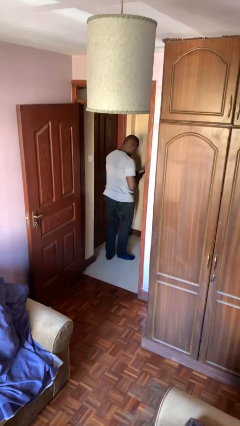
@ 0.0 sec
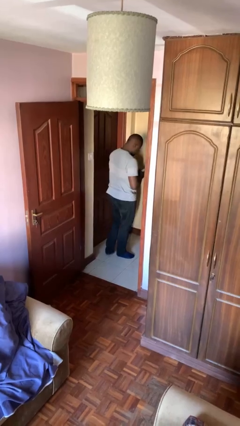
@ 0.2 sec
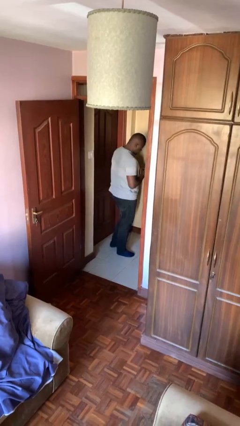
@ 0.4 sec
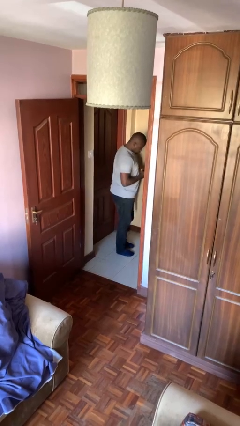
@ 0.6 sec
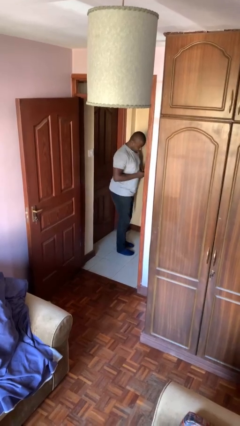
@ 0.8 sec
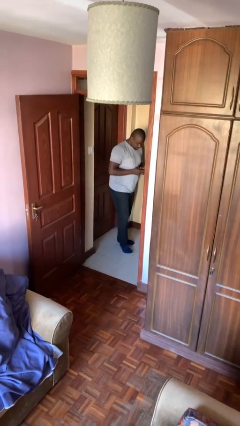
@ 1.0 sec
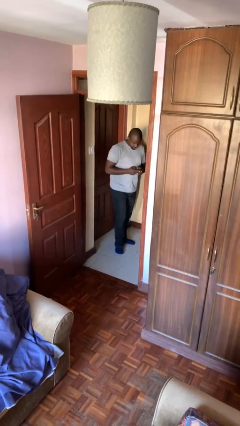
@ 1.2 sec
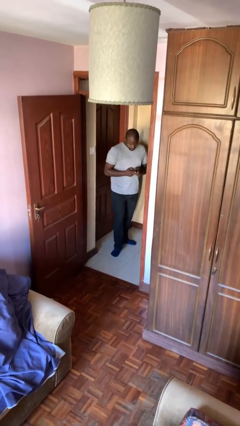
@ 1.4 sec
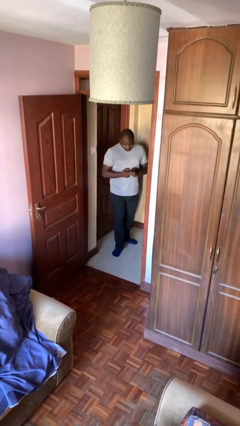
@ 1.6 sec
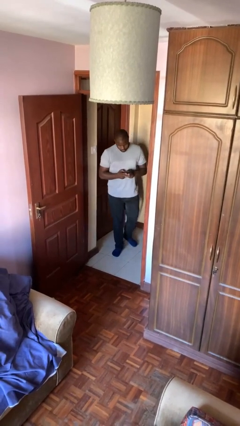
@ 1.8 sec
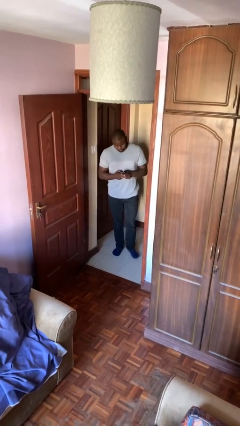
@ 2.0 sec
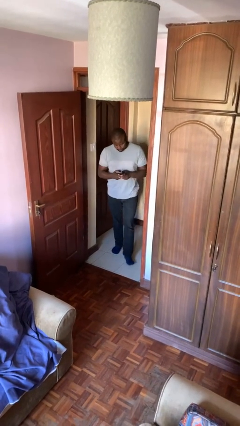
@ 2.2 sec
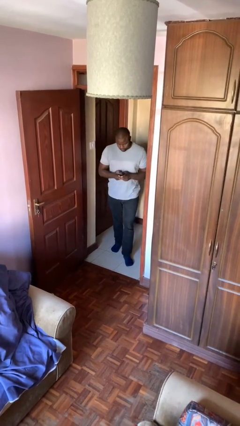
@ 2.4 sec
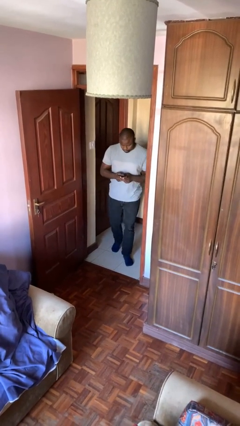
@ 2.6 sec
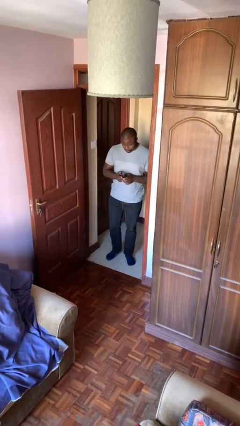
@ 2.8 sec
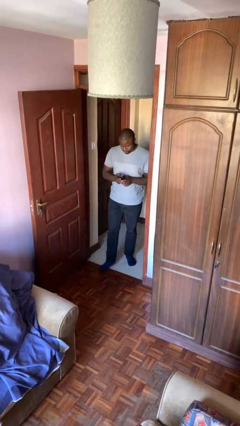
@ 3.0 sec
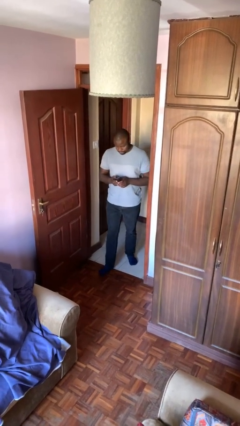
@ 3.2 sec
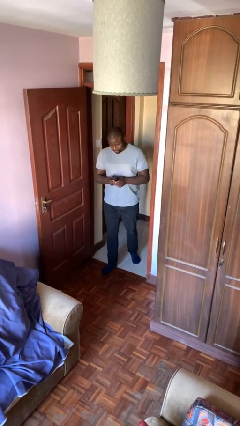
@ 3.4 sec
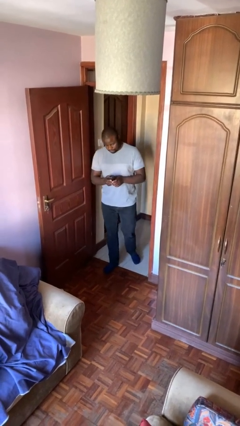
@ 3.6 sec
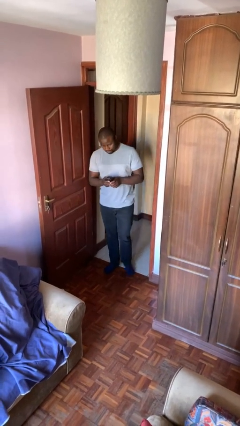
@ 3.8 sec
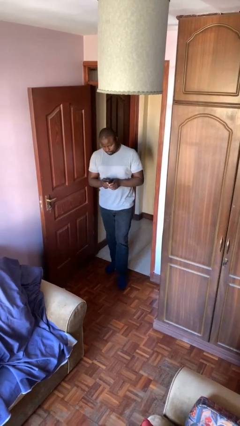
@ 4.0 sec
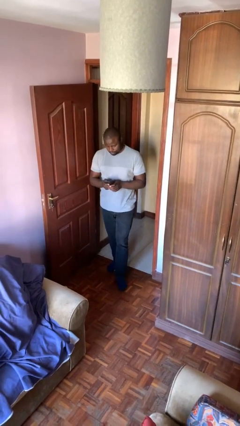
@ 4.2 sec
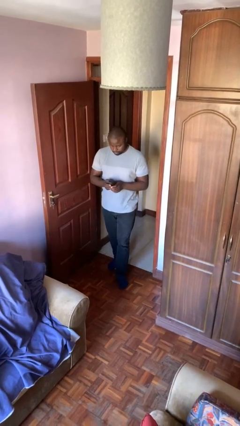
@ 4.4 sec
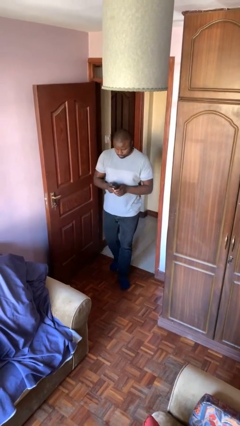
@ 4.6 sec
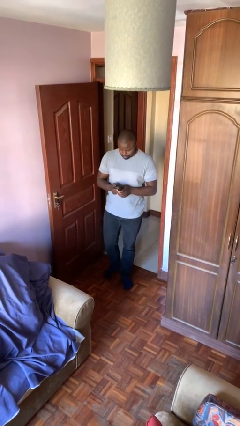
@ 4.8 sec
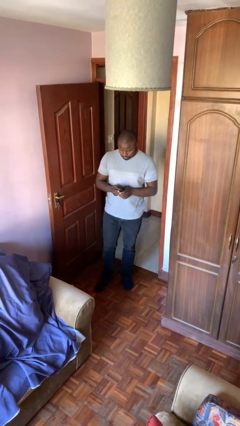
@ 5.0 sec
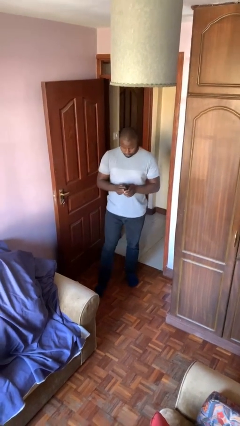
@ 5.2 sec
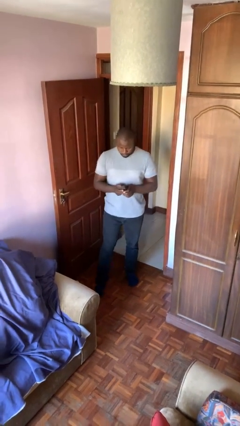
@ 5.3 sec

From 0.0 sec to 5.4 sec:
person enters scene through structure

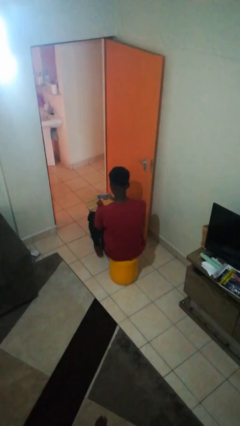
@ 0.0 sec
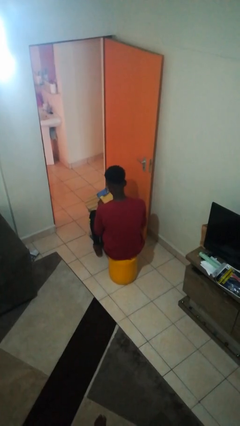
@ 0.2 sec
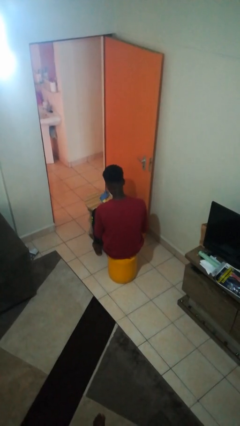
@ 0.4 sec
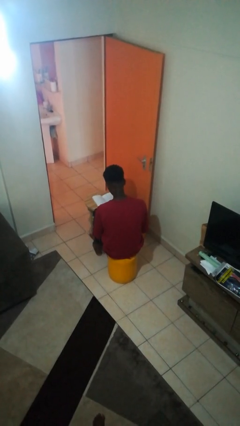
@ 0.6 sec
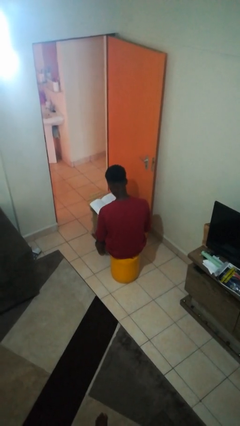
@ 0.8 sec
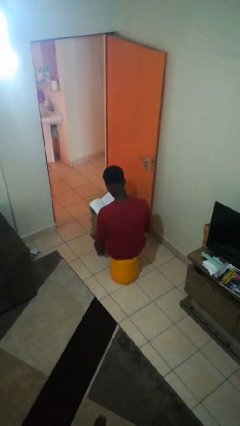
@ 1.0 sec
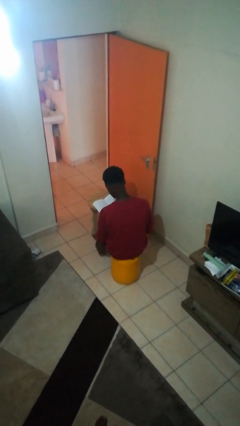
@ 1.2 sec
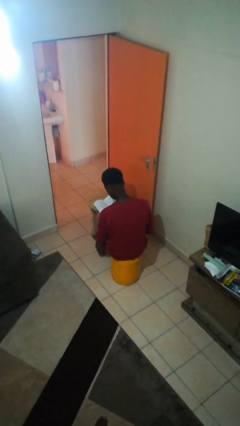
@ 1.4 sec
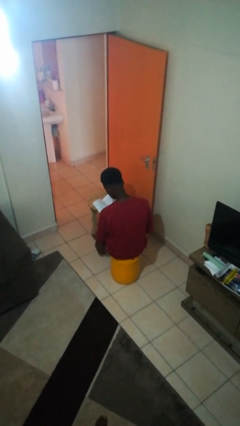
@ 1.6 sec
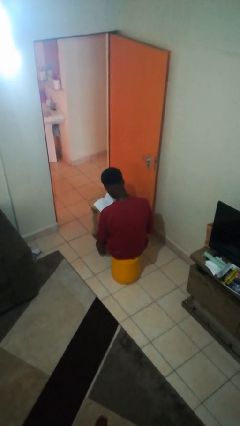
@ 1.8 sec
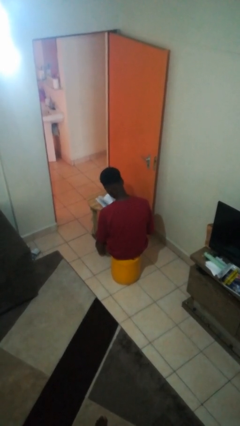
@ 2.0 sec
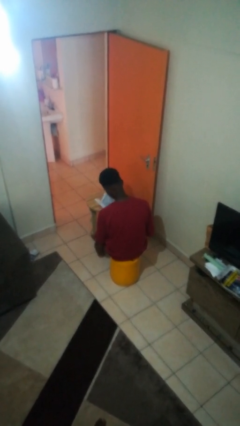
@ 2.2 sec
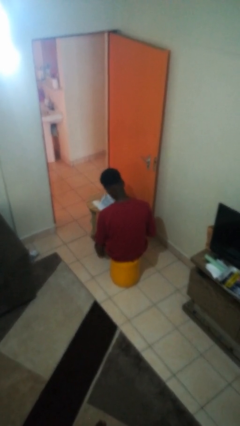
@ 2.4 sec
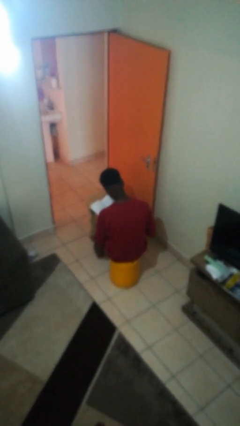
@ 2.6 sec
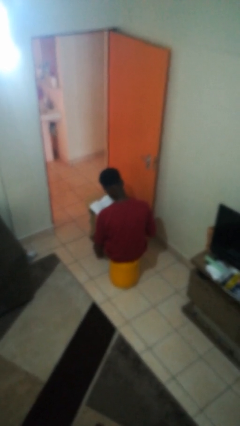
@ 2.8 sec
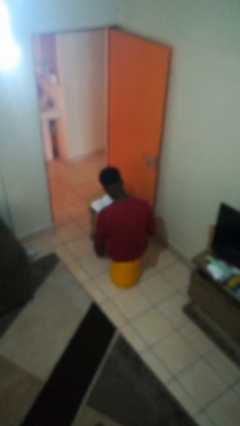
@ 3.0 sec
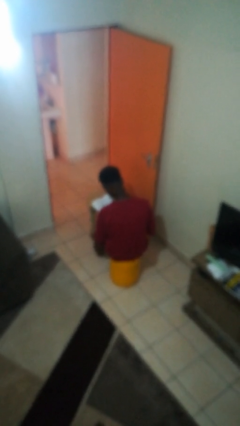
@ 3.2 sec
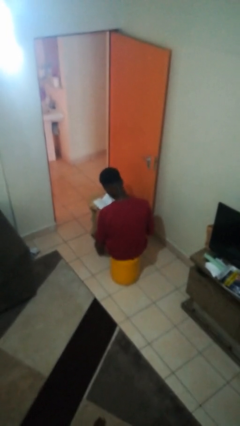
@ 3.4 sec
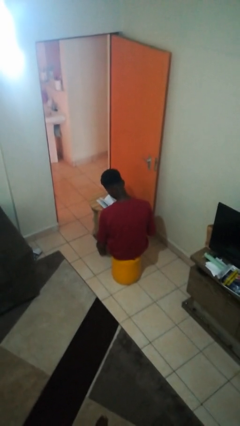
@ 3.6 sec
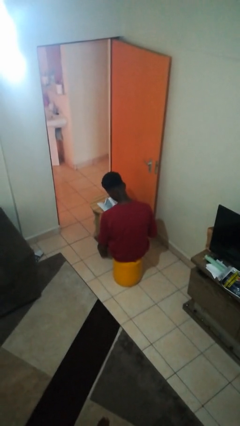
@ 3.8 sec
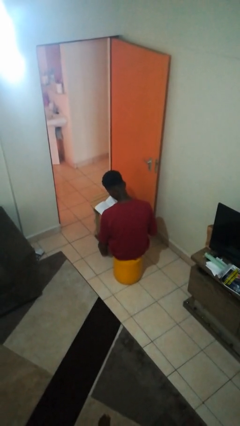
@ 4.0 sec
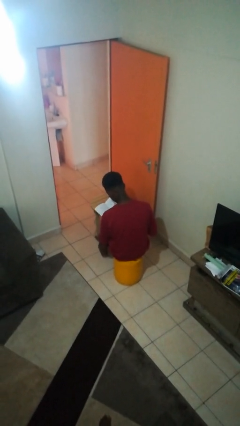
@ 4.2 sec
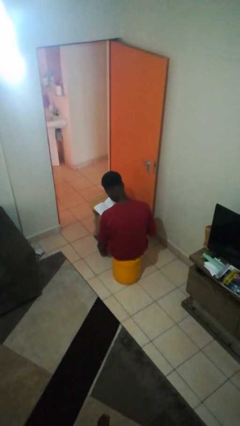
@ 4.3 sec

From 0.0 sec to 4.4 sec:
person reads book

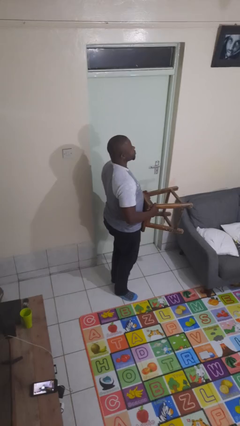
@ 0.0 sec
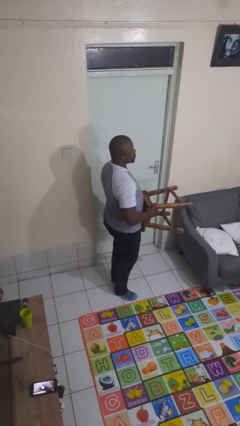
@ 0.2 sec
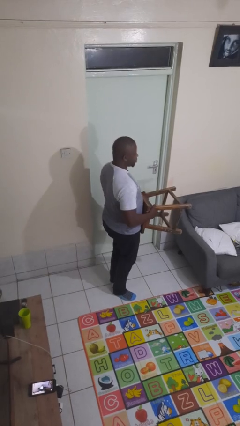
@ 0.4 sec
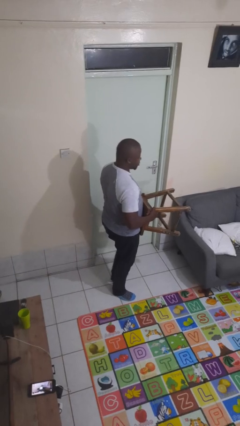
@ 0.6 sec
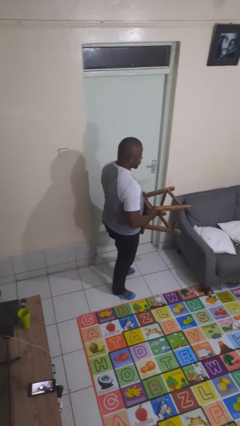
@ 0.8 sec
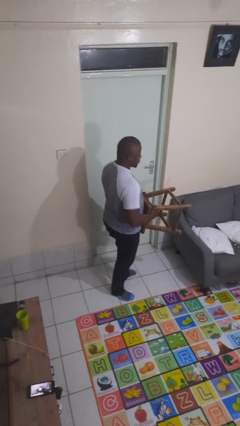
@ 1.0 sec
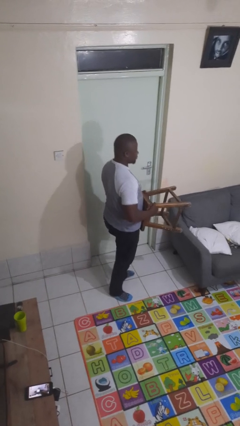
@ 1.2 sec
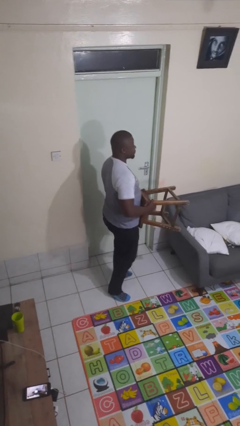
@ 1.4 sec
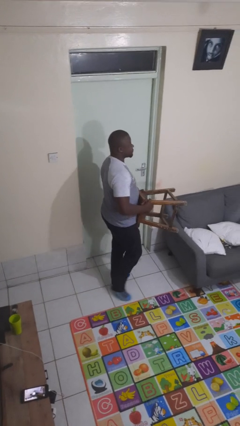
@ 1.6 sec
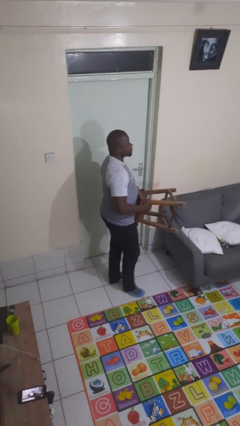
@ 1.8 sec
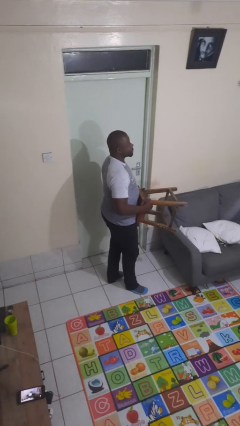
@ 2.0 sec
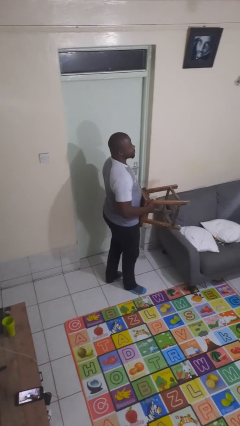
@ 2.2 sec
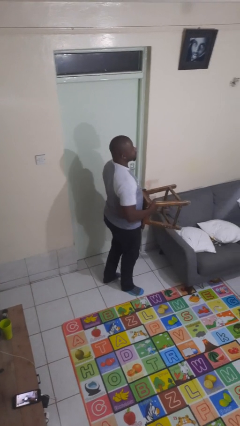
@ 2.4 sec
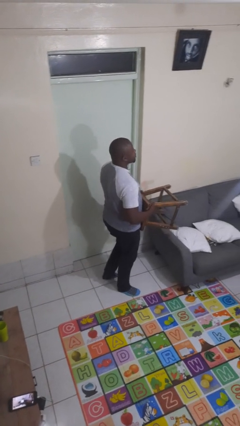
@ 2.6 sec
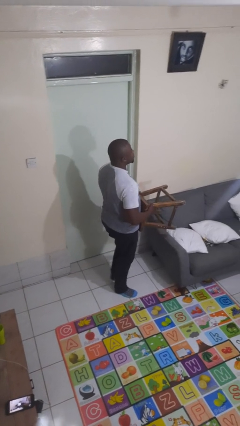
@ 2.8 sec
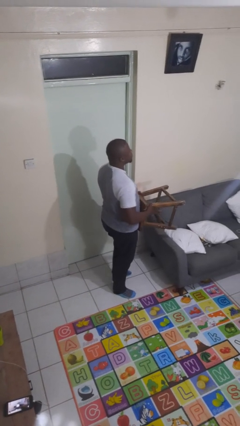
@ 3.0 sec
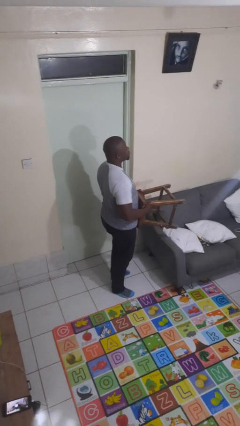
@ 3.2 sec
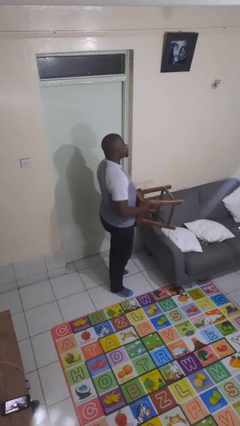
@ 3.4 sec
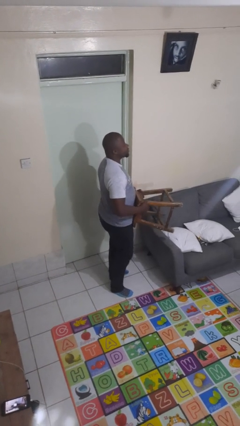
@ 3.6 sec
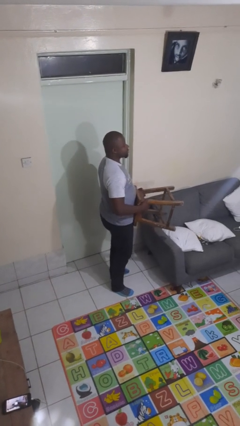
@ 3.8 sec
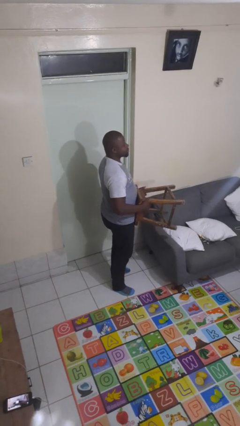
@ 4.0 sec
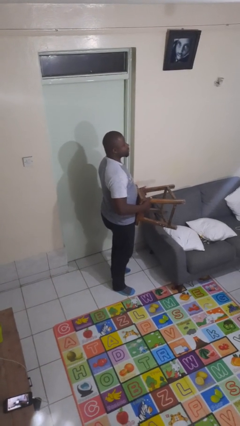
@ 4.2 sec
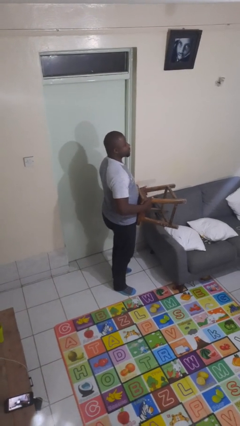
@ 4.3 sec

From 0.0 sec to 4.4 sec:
person carries furniture

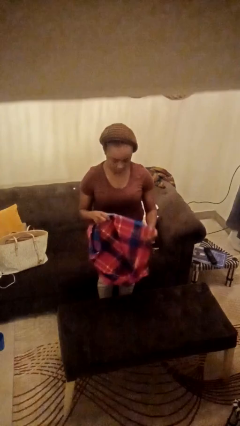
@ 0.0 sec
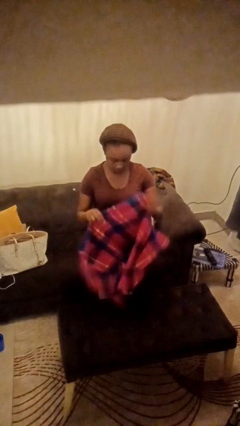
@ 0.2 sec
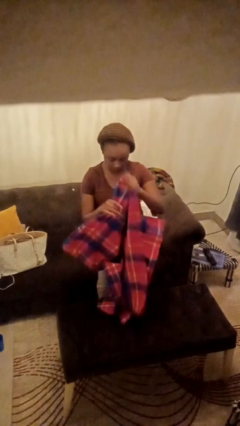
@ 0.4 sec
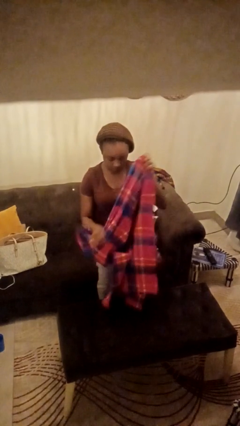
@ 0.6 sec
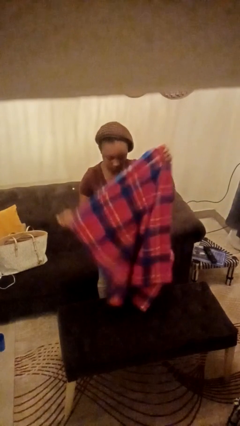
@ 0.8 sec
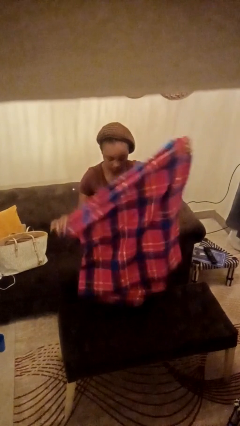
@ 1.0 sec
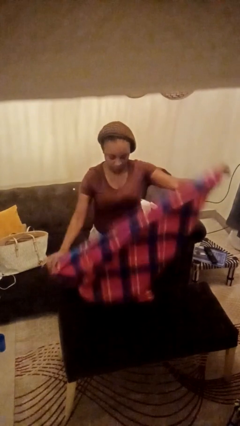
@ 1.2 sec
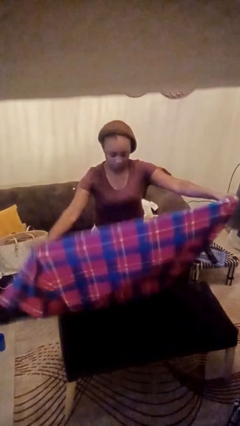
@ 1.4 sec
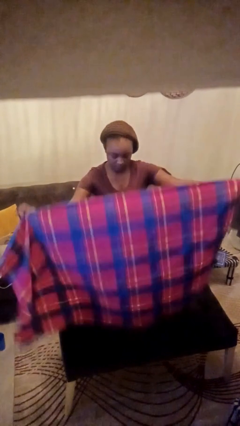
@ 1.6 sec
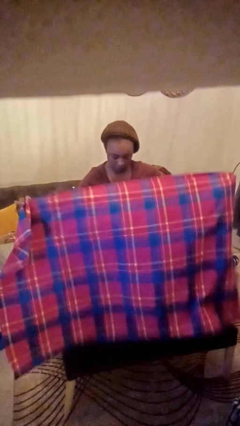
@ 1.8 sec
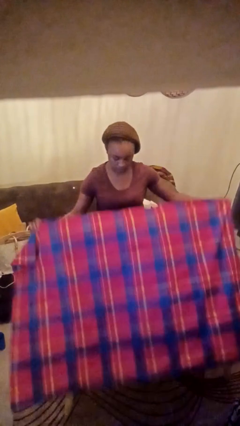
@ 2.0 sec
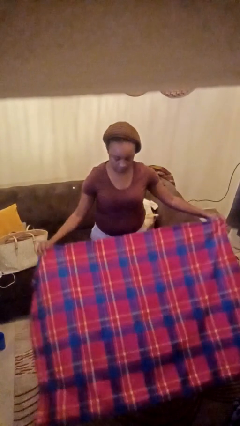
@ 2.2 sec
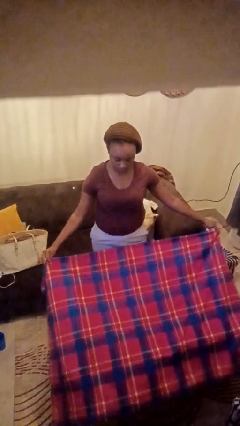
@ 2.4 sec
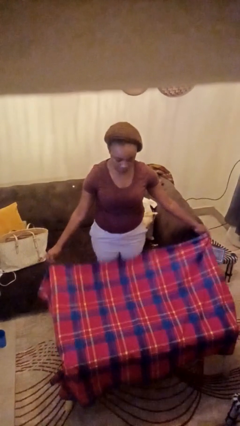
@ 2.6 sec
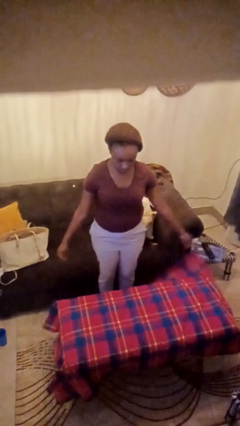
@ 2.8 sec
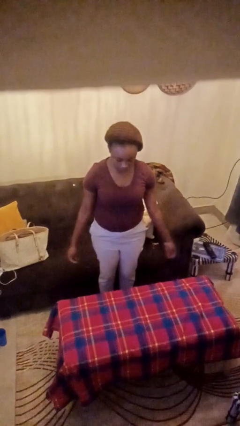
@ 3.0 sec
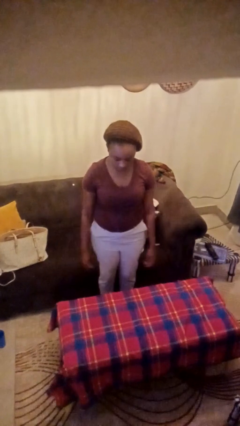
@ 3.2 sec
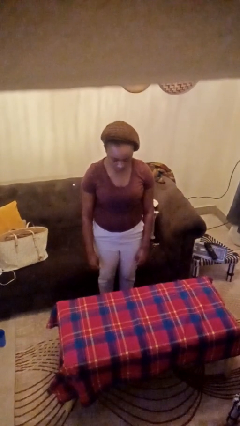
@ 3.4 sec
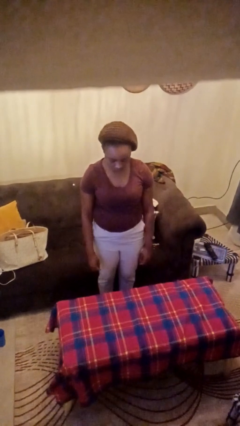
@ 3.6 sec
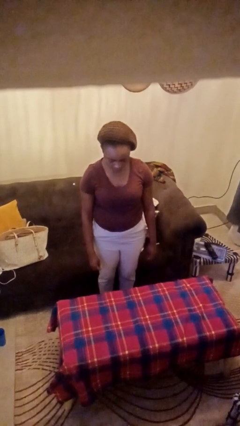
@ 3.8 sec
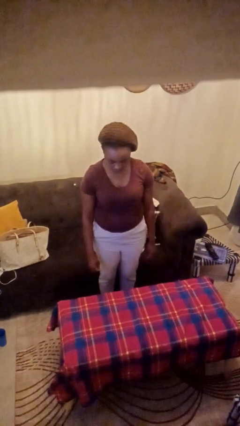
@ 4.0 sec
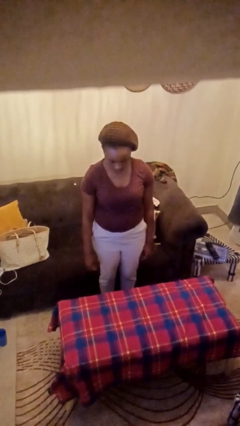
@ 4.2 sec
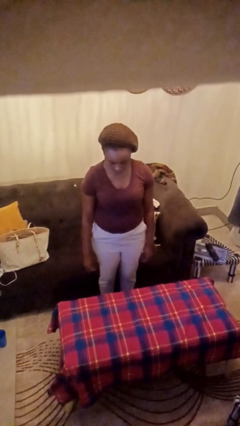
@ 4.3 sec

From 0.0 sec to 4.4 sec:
person spreads tablecloth
